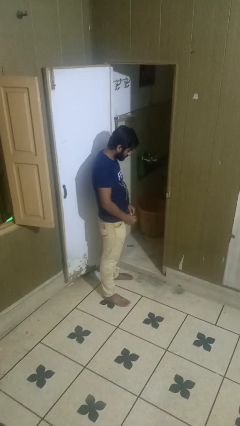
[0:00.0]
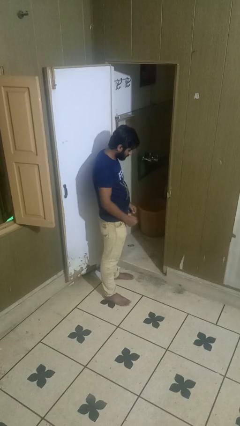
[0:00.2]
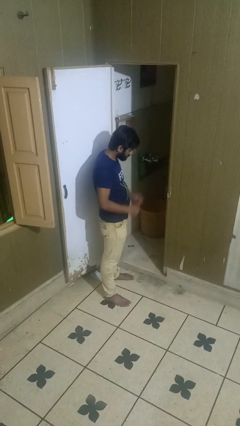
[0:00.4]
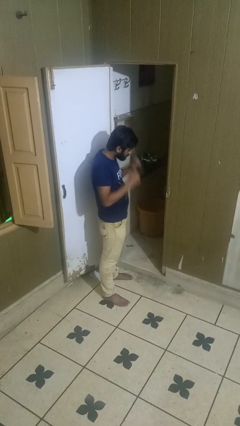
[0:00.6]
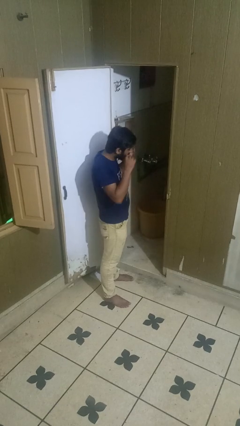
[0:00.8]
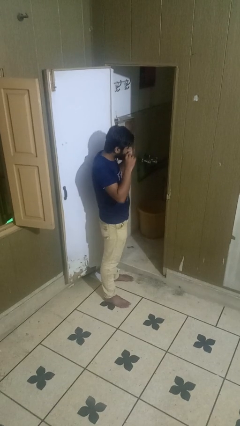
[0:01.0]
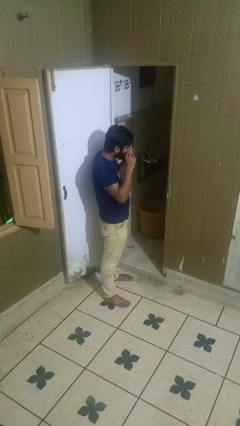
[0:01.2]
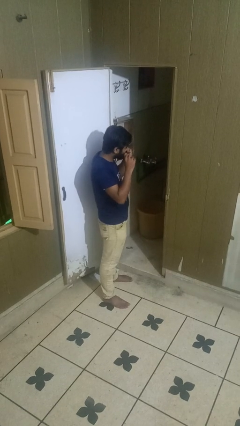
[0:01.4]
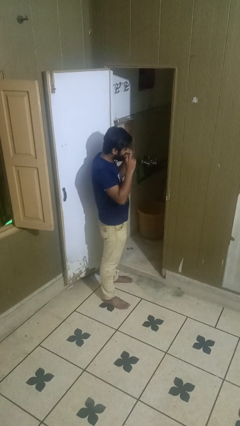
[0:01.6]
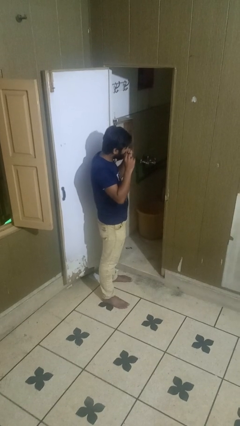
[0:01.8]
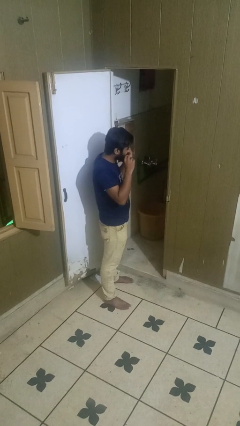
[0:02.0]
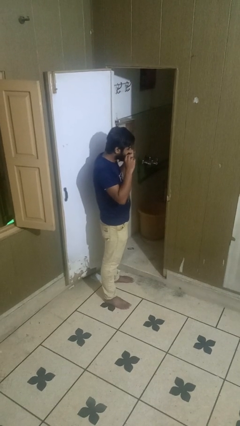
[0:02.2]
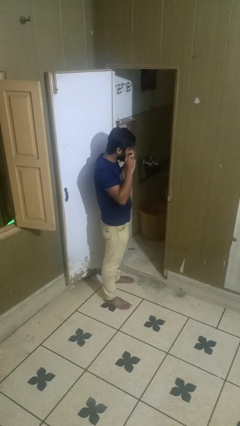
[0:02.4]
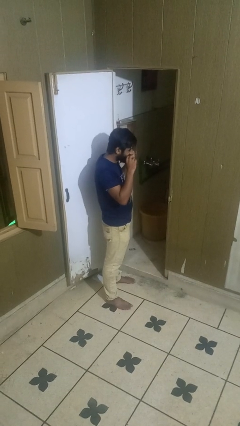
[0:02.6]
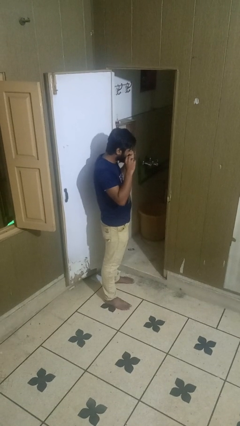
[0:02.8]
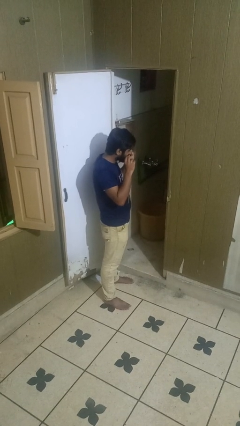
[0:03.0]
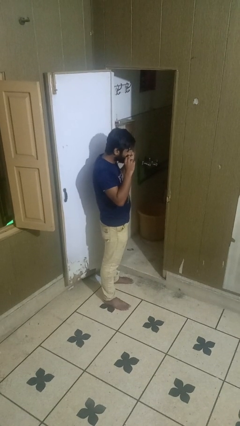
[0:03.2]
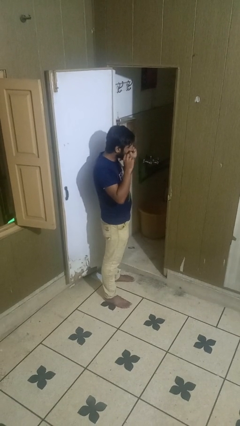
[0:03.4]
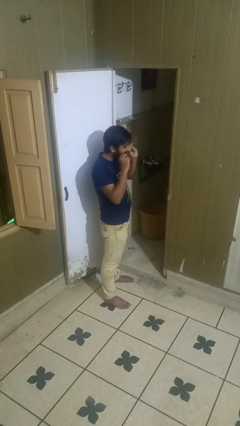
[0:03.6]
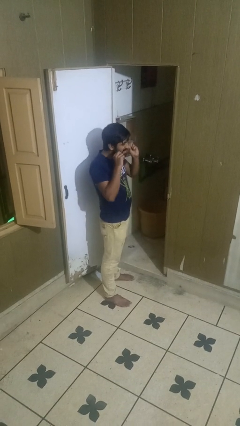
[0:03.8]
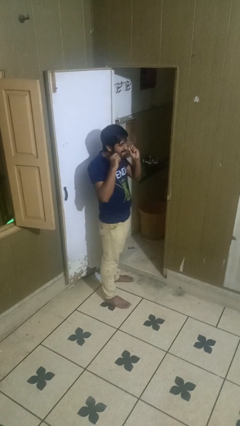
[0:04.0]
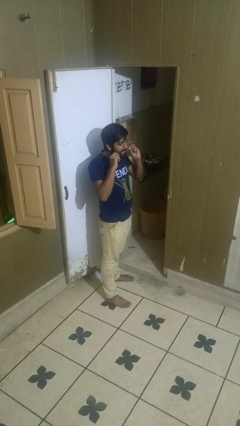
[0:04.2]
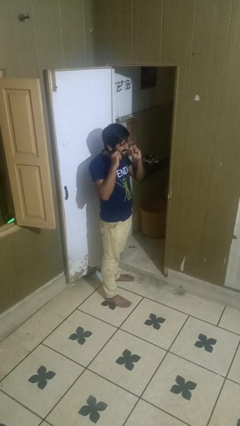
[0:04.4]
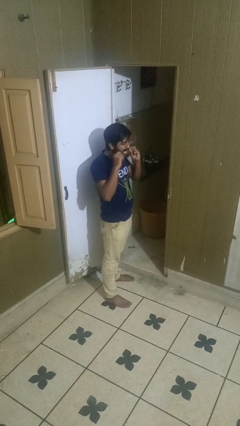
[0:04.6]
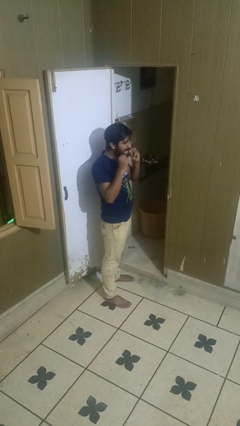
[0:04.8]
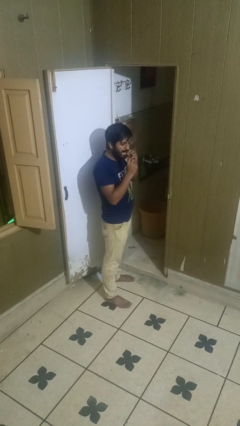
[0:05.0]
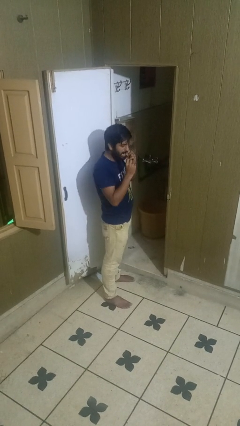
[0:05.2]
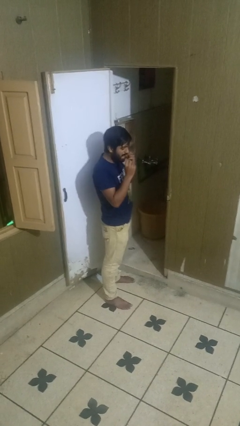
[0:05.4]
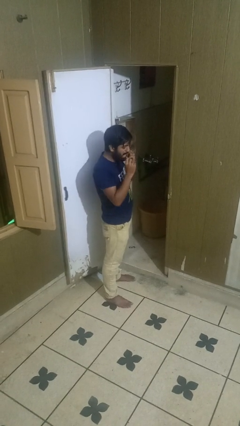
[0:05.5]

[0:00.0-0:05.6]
person flosses

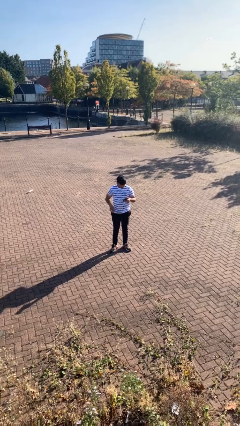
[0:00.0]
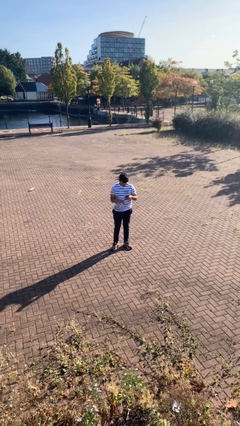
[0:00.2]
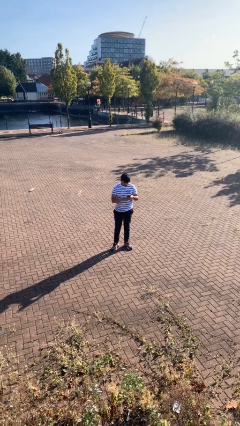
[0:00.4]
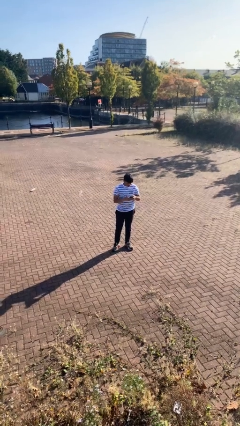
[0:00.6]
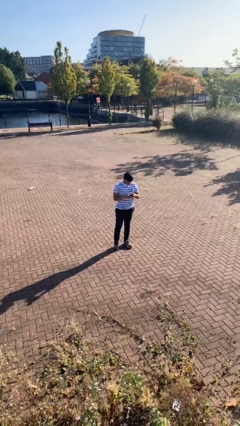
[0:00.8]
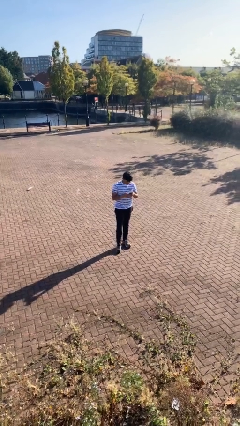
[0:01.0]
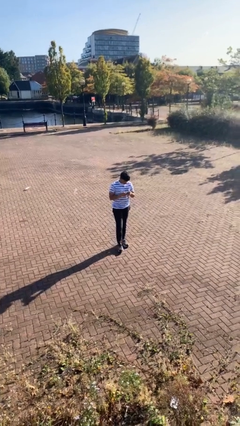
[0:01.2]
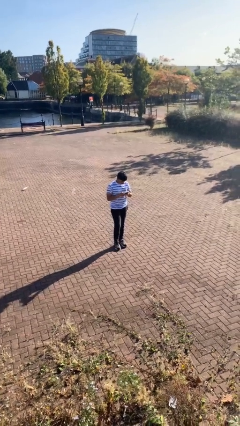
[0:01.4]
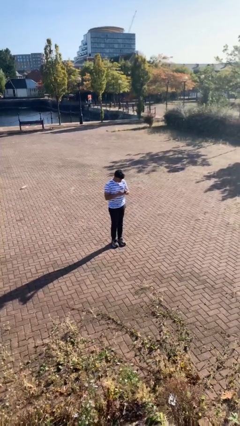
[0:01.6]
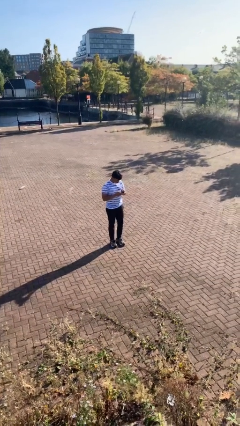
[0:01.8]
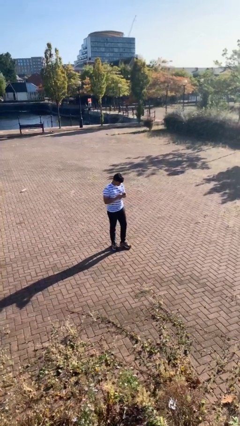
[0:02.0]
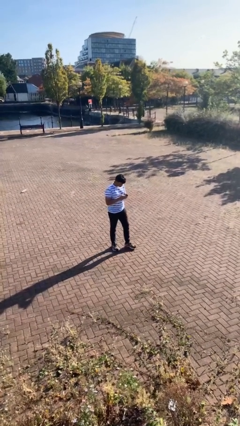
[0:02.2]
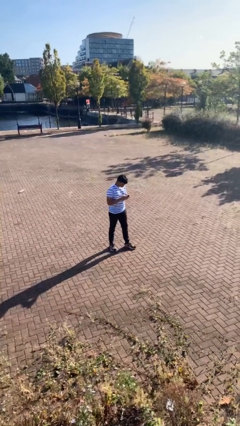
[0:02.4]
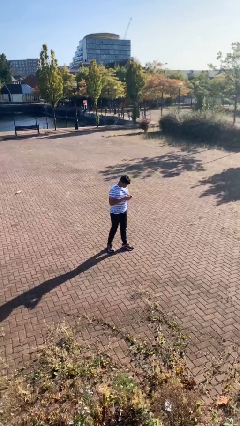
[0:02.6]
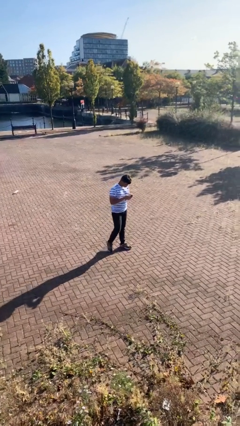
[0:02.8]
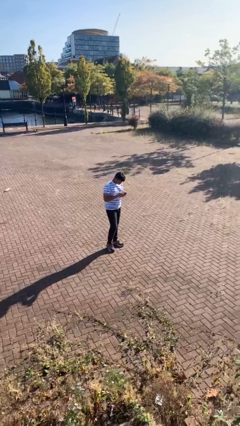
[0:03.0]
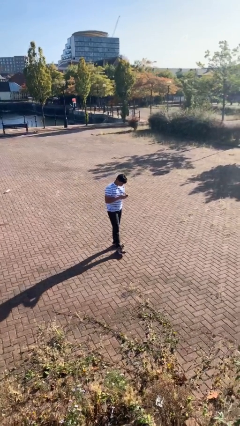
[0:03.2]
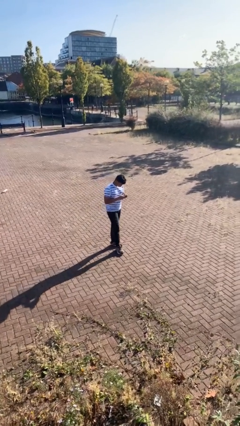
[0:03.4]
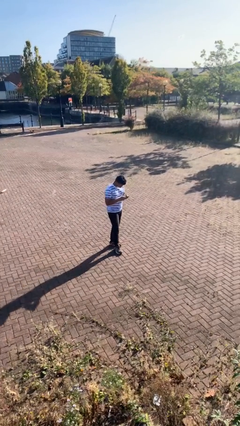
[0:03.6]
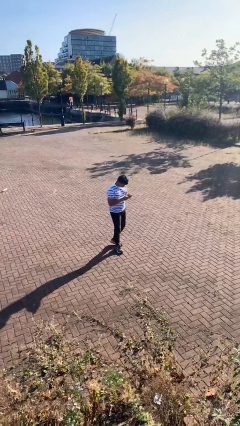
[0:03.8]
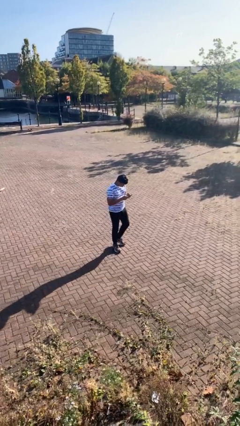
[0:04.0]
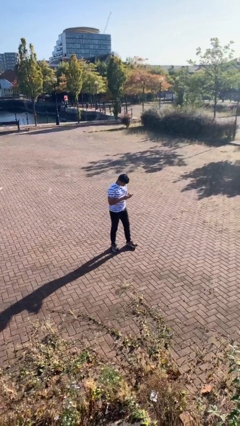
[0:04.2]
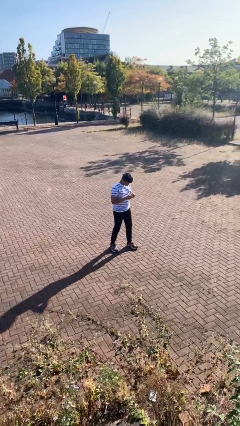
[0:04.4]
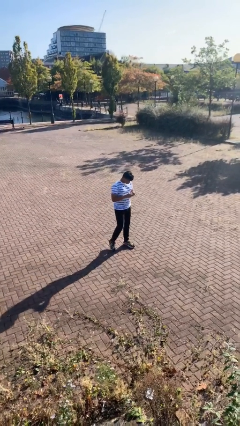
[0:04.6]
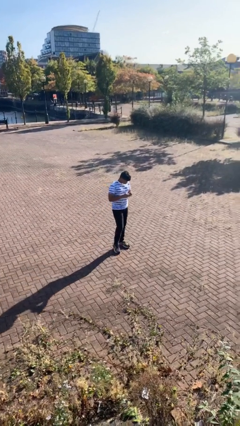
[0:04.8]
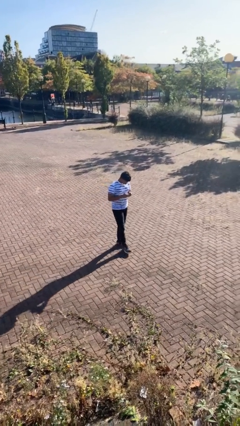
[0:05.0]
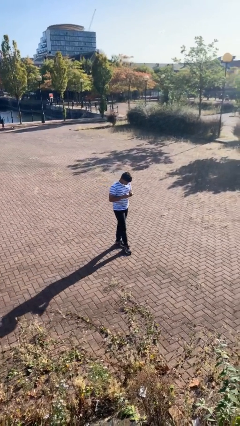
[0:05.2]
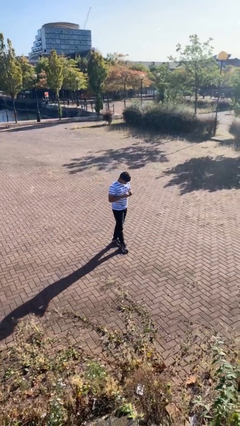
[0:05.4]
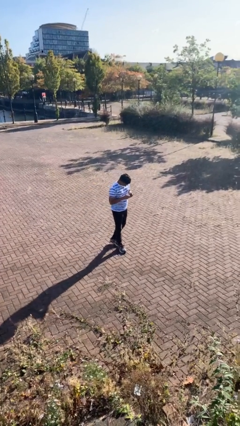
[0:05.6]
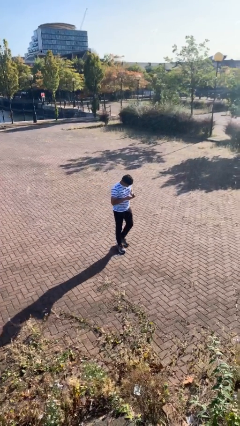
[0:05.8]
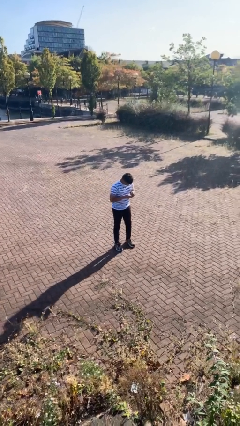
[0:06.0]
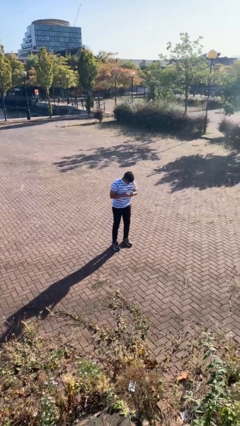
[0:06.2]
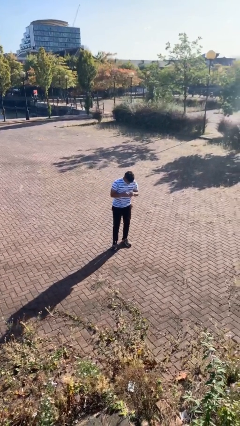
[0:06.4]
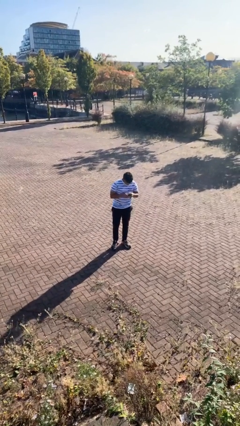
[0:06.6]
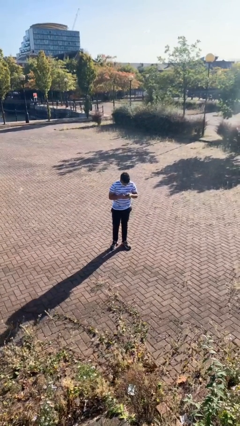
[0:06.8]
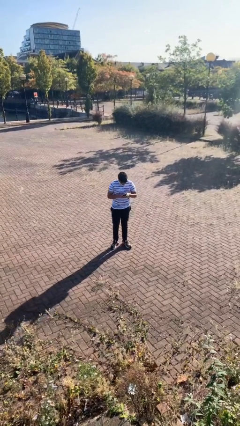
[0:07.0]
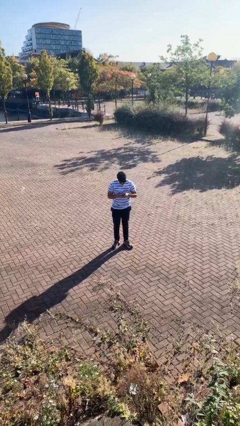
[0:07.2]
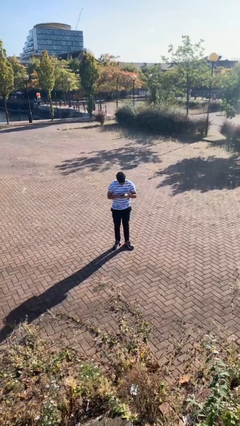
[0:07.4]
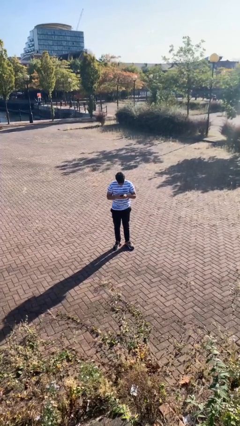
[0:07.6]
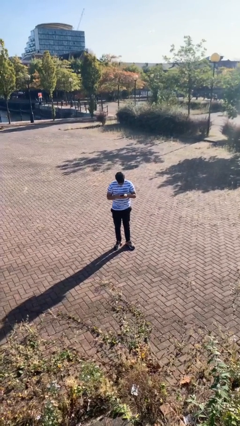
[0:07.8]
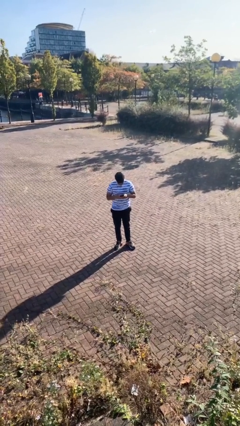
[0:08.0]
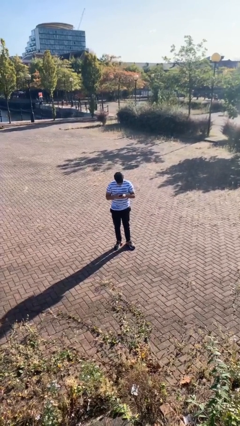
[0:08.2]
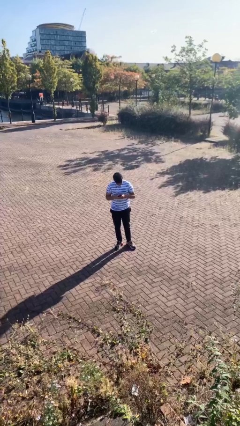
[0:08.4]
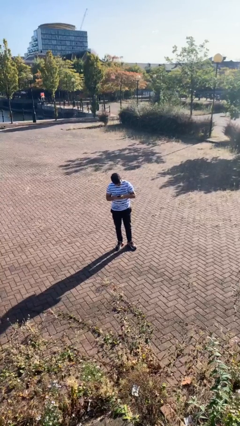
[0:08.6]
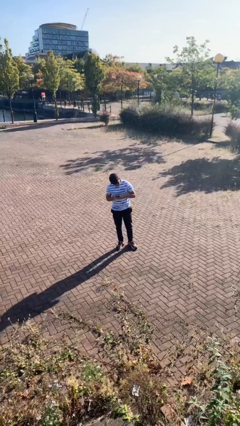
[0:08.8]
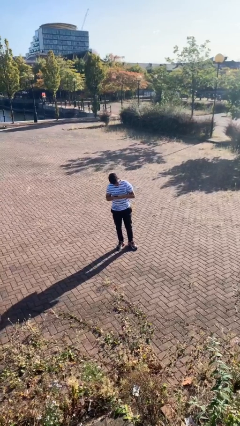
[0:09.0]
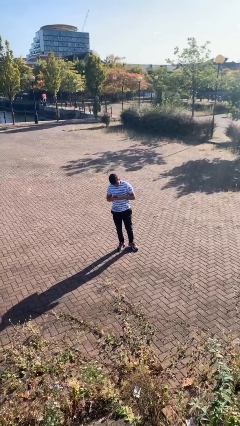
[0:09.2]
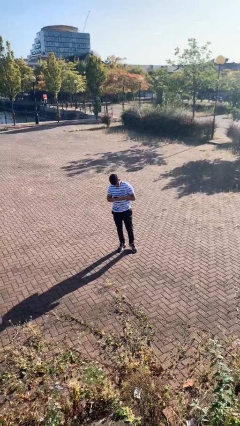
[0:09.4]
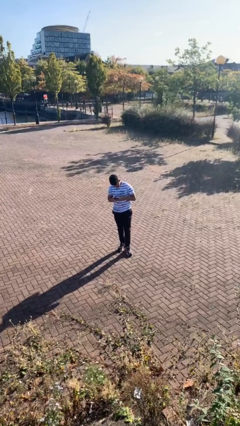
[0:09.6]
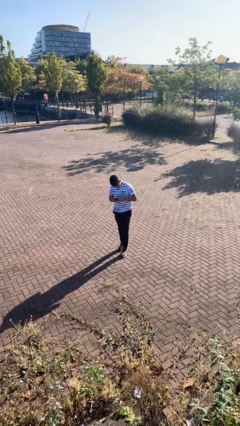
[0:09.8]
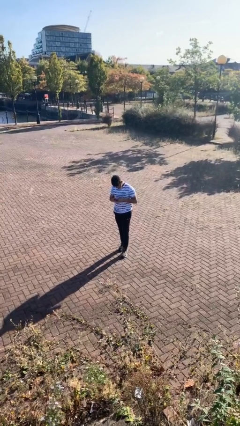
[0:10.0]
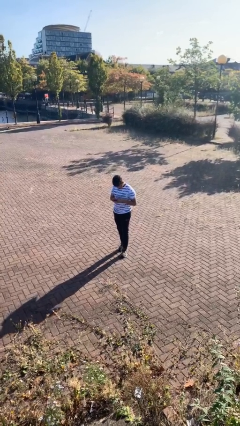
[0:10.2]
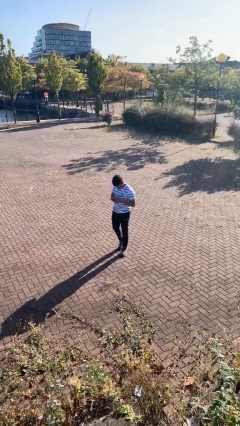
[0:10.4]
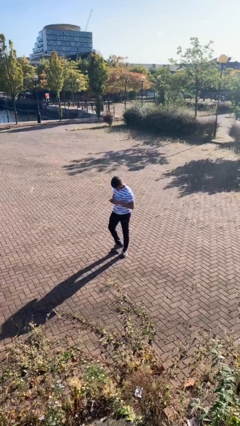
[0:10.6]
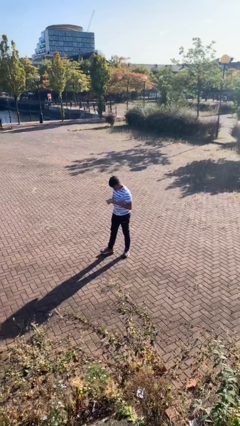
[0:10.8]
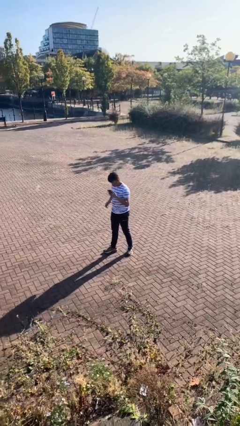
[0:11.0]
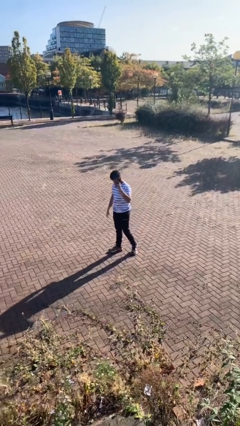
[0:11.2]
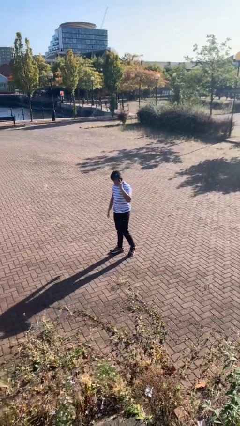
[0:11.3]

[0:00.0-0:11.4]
person texts on phone

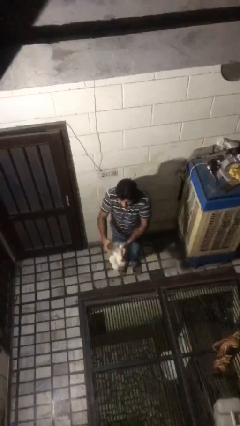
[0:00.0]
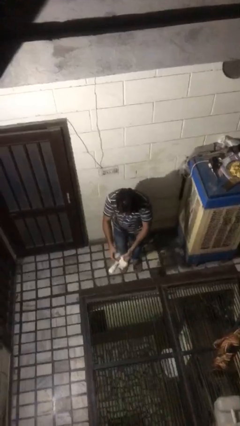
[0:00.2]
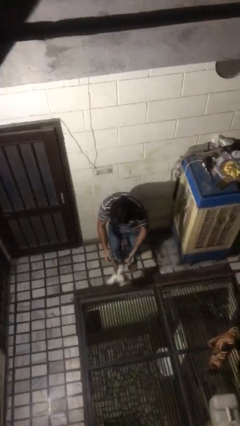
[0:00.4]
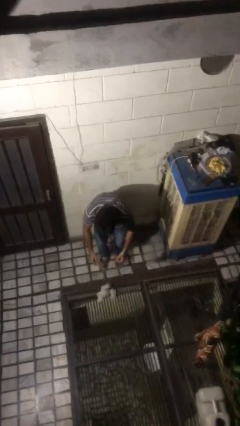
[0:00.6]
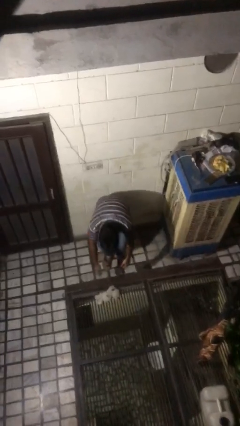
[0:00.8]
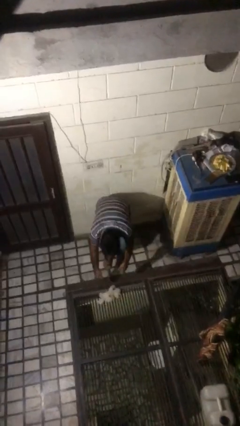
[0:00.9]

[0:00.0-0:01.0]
person catches dropped object
